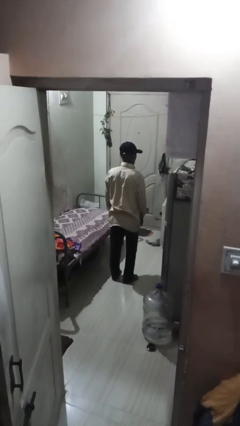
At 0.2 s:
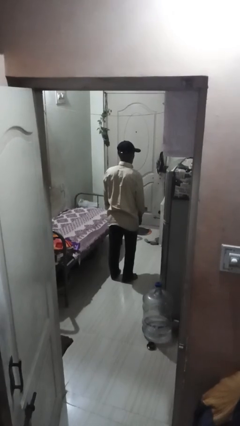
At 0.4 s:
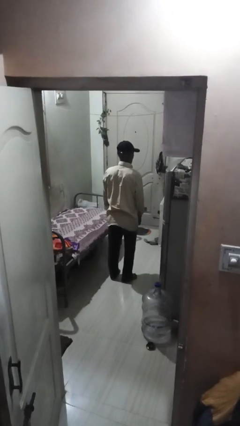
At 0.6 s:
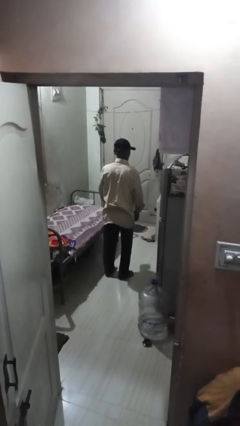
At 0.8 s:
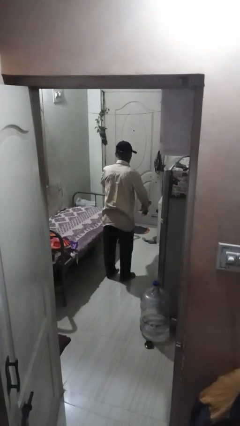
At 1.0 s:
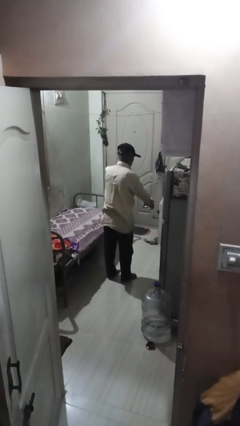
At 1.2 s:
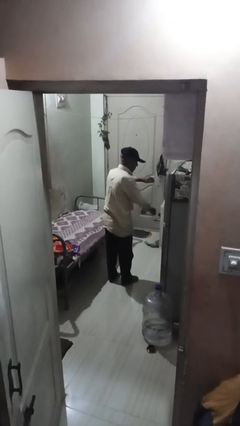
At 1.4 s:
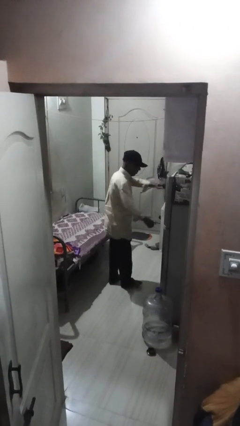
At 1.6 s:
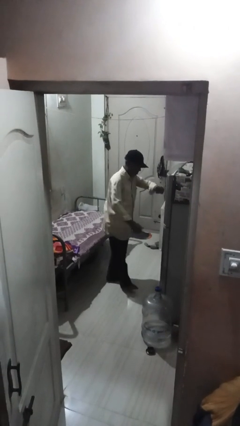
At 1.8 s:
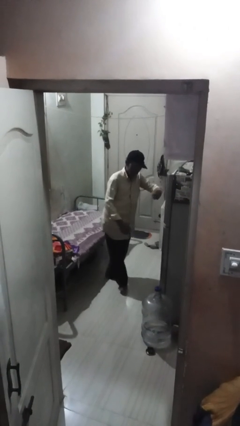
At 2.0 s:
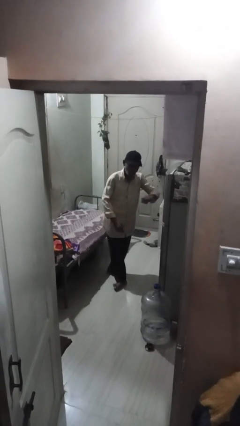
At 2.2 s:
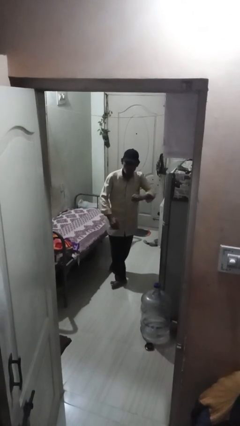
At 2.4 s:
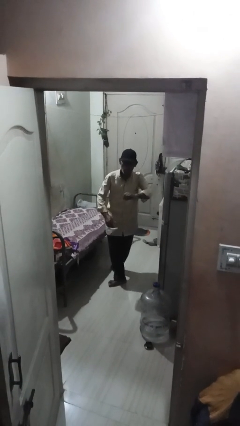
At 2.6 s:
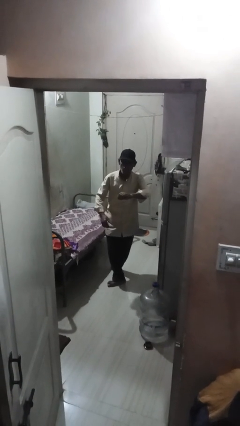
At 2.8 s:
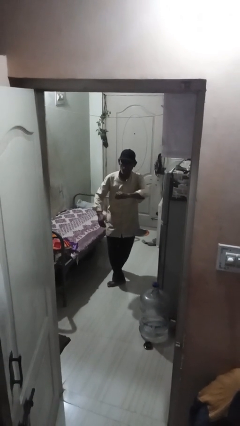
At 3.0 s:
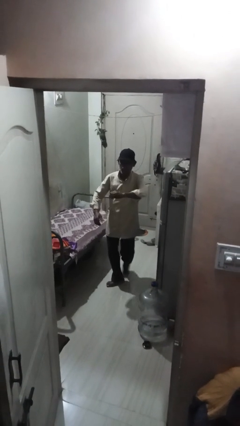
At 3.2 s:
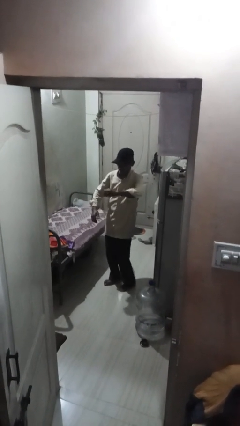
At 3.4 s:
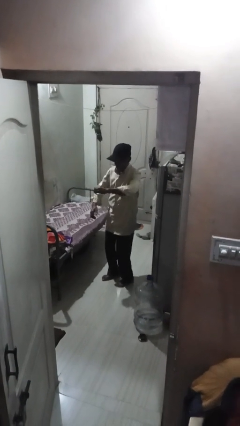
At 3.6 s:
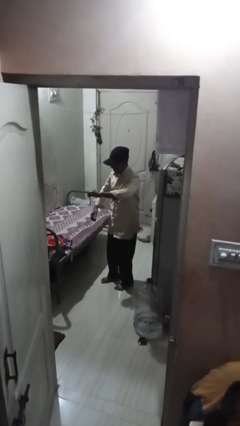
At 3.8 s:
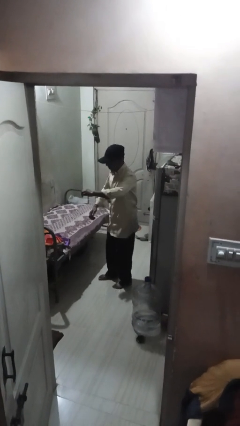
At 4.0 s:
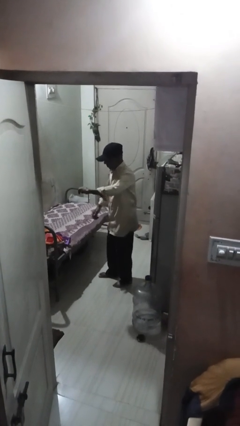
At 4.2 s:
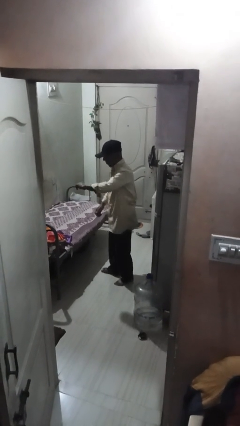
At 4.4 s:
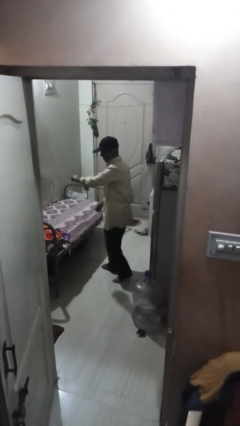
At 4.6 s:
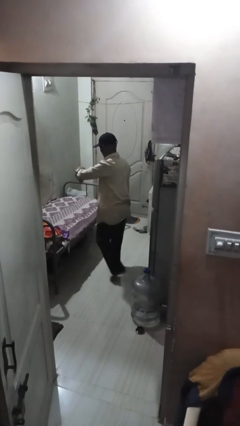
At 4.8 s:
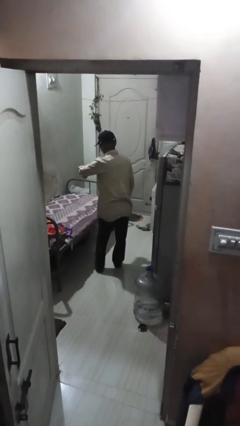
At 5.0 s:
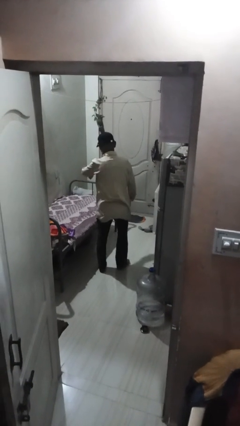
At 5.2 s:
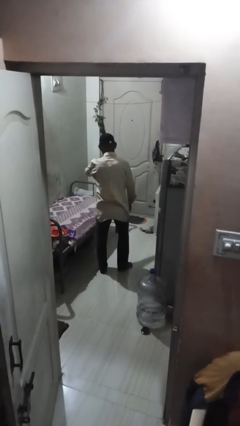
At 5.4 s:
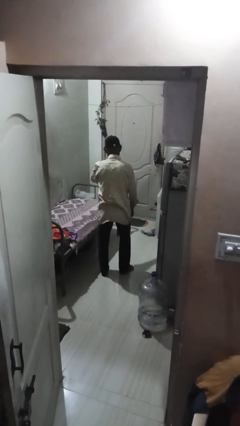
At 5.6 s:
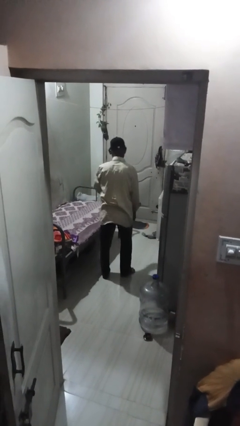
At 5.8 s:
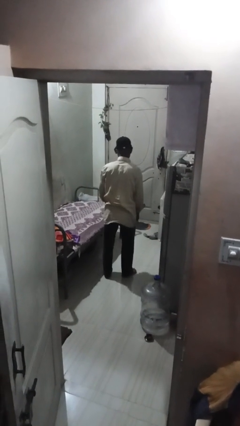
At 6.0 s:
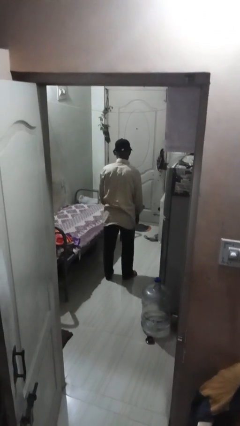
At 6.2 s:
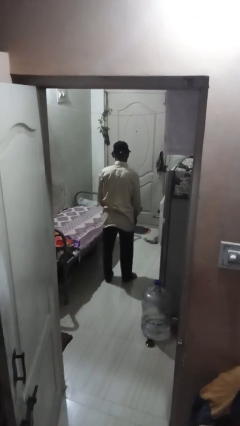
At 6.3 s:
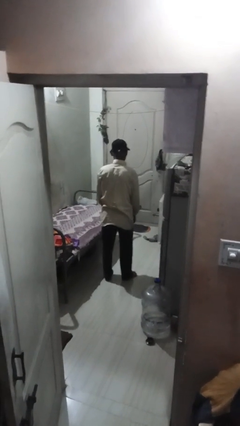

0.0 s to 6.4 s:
person twirls

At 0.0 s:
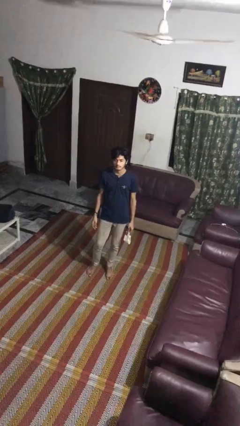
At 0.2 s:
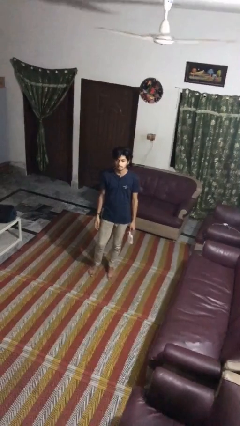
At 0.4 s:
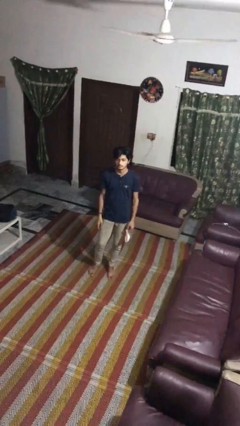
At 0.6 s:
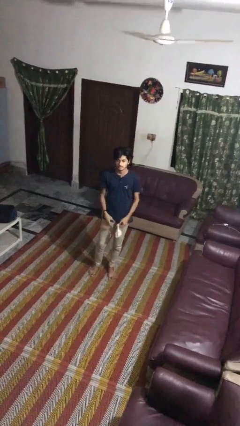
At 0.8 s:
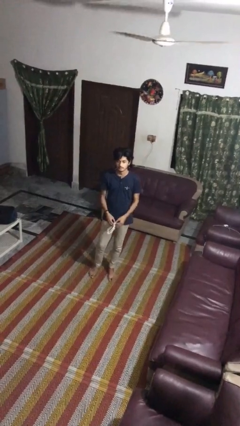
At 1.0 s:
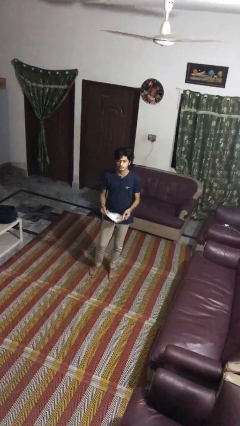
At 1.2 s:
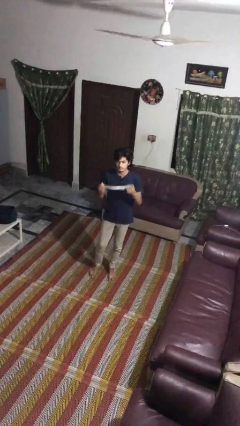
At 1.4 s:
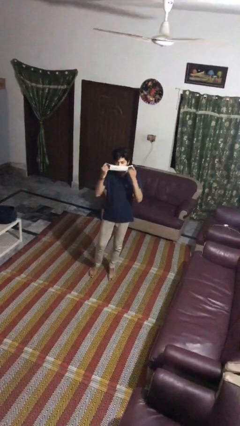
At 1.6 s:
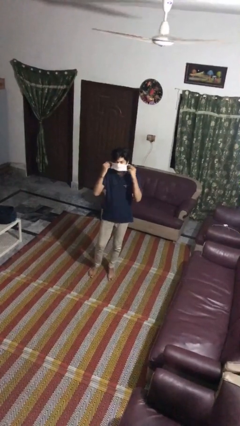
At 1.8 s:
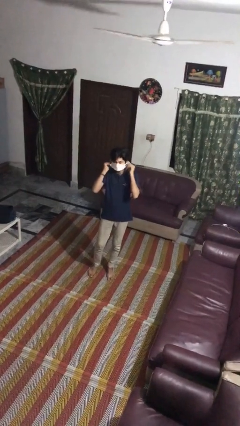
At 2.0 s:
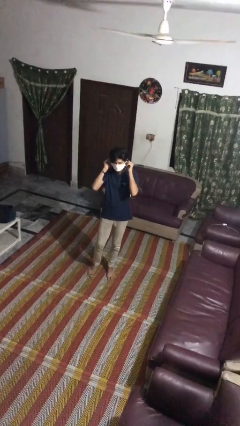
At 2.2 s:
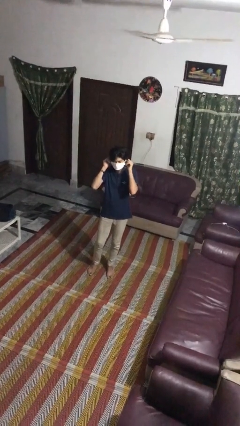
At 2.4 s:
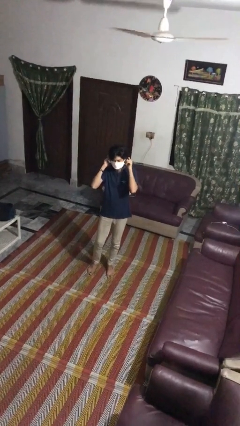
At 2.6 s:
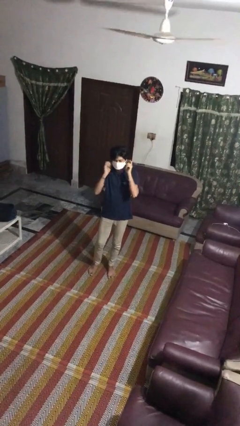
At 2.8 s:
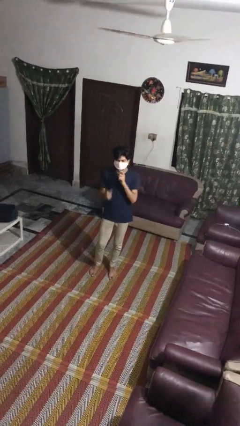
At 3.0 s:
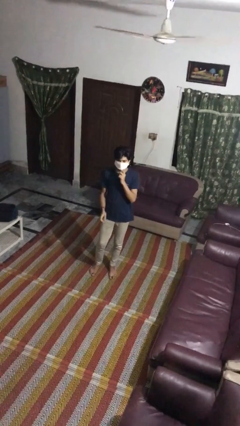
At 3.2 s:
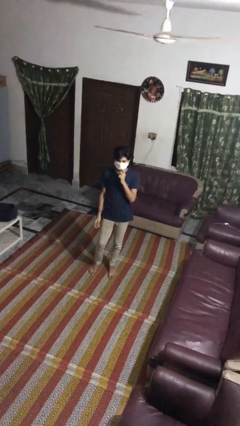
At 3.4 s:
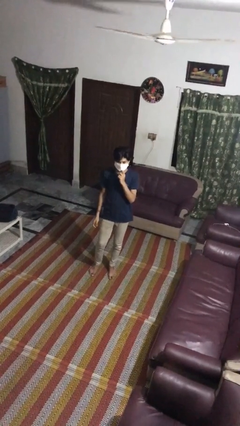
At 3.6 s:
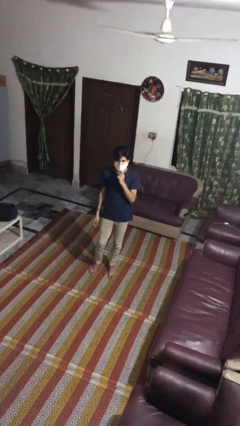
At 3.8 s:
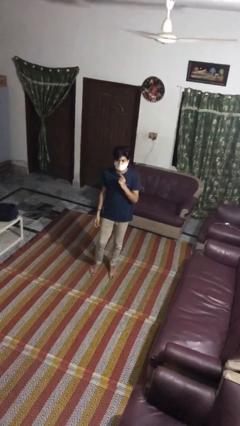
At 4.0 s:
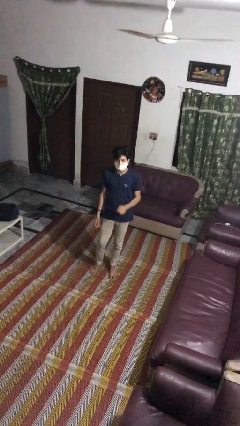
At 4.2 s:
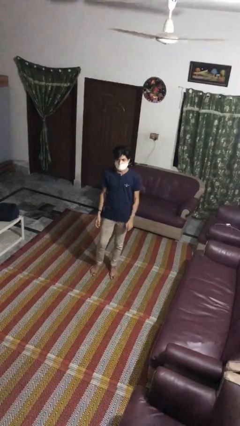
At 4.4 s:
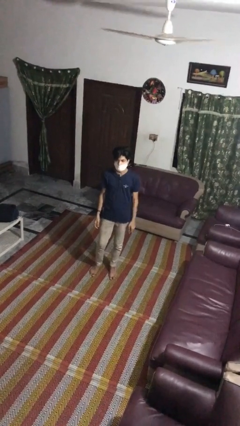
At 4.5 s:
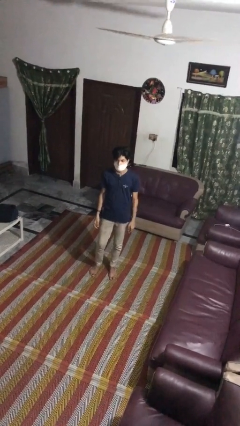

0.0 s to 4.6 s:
person puts on facemask

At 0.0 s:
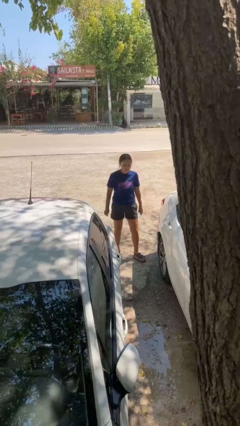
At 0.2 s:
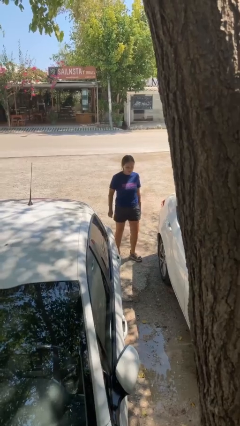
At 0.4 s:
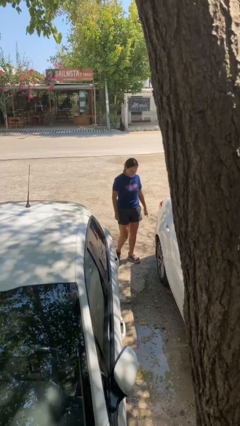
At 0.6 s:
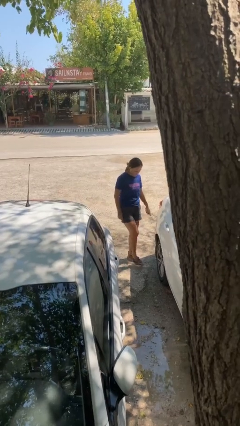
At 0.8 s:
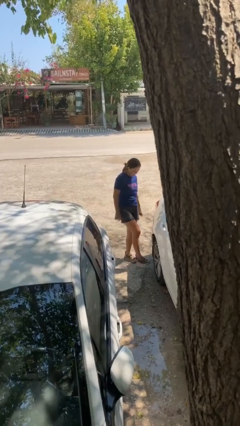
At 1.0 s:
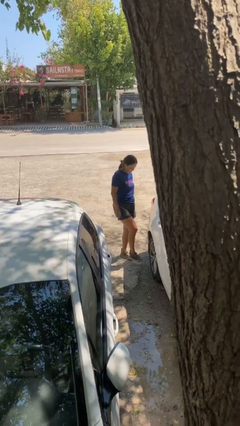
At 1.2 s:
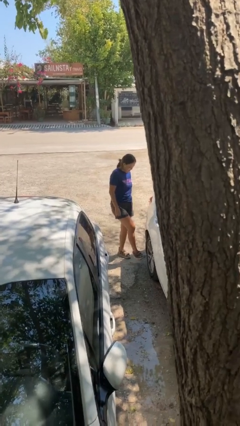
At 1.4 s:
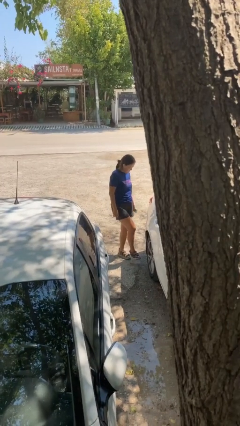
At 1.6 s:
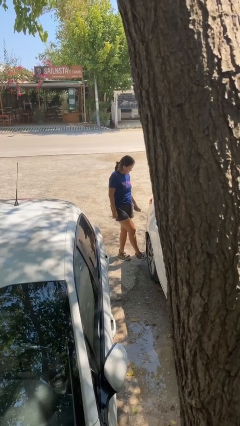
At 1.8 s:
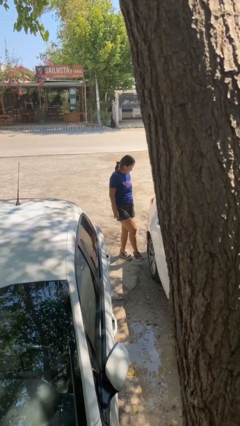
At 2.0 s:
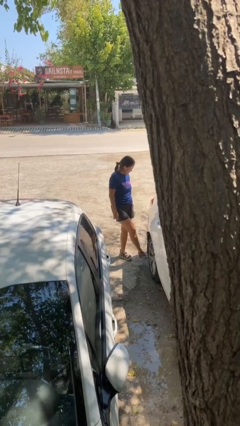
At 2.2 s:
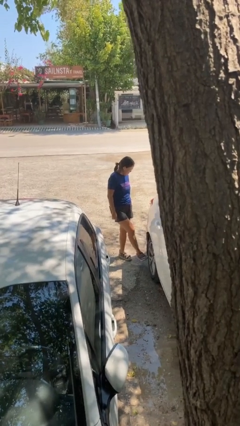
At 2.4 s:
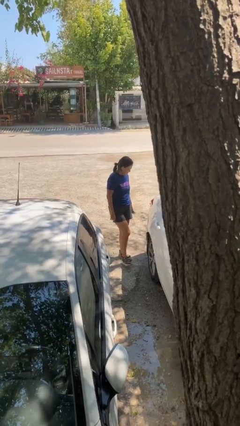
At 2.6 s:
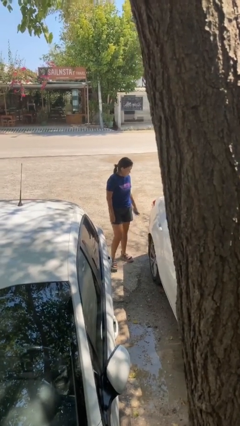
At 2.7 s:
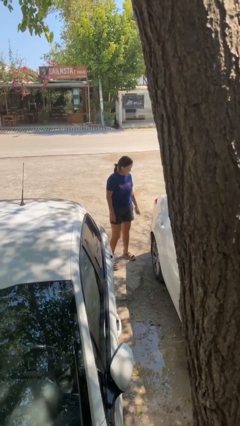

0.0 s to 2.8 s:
person kicks car tires

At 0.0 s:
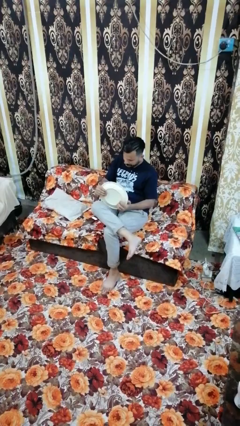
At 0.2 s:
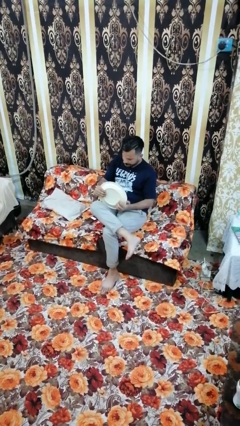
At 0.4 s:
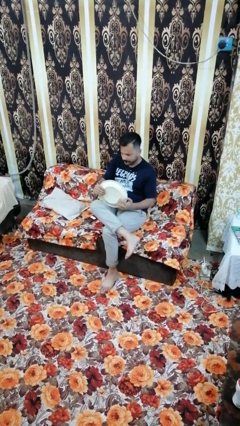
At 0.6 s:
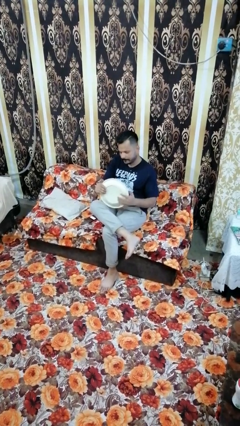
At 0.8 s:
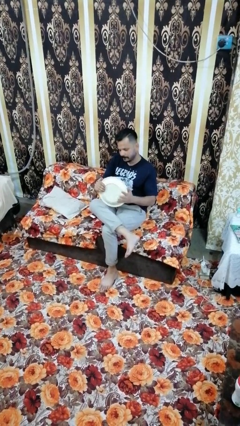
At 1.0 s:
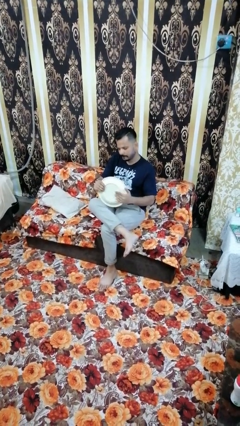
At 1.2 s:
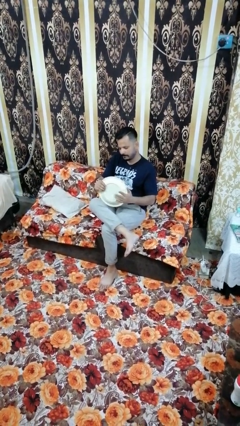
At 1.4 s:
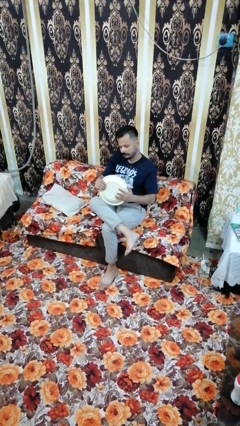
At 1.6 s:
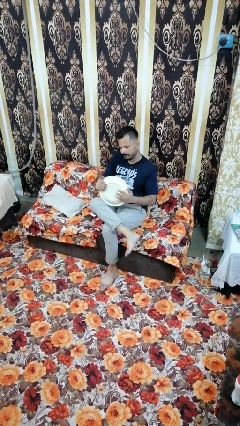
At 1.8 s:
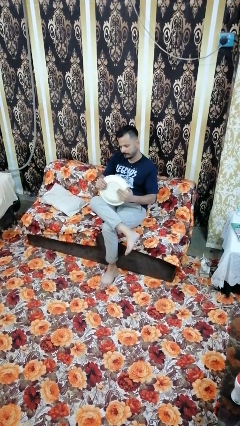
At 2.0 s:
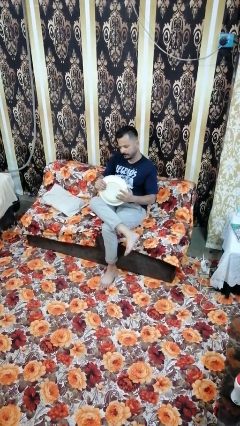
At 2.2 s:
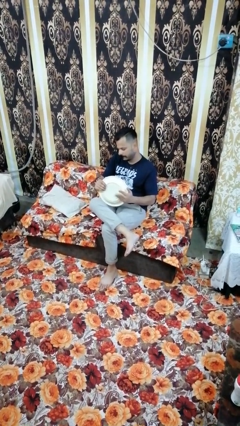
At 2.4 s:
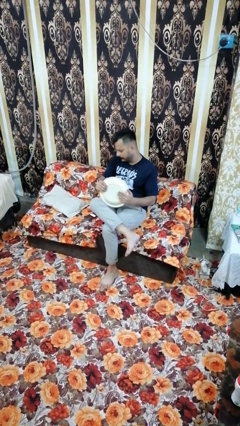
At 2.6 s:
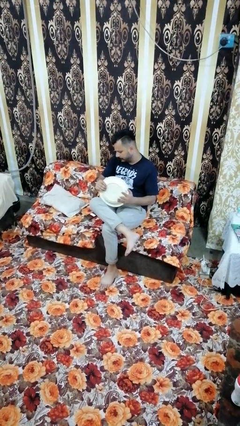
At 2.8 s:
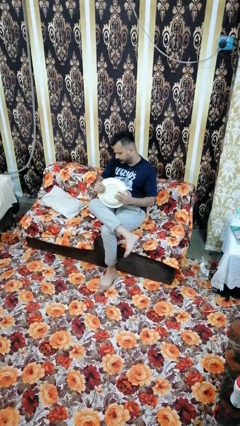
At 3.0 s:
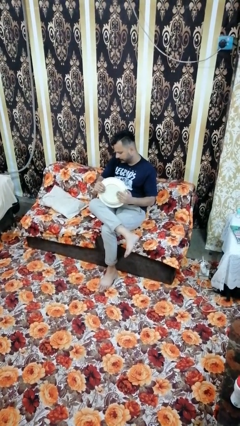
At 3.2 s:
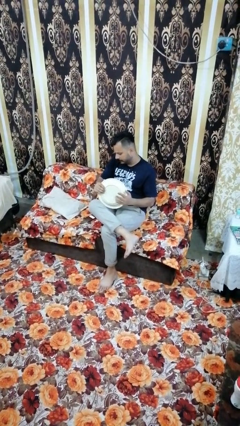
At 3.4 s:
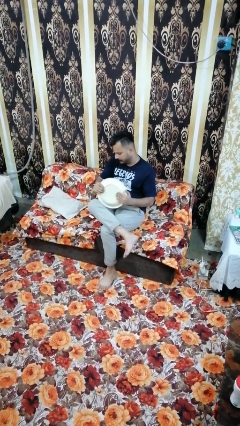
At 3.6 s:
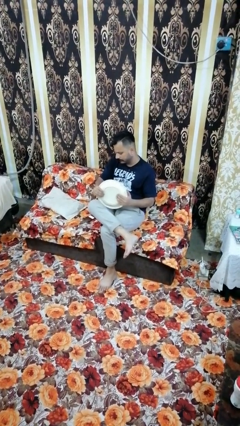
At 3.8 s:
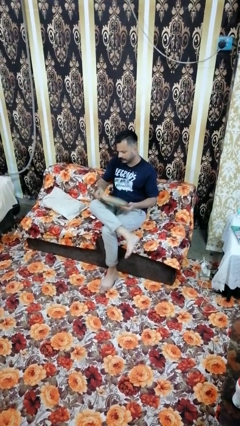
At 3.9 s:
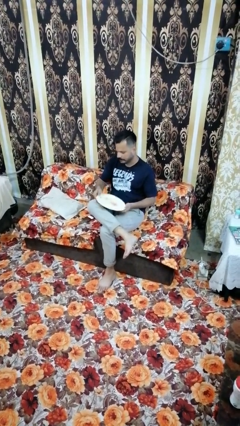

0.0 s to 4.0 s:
person taps object with finger
